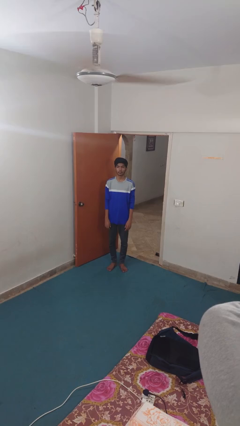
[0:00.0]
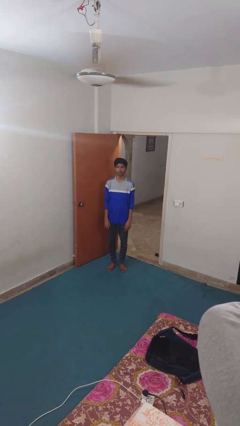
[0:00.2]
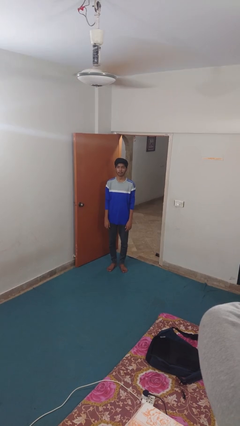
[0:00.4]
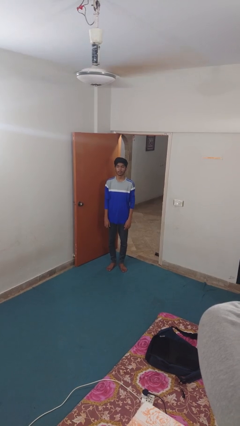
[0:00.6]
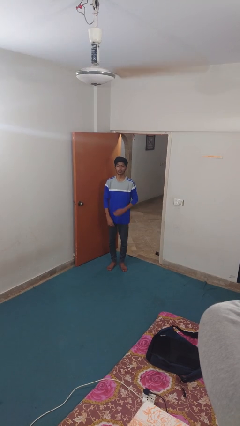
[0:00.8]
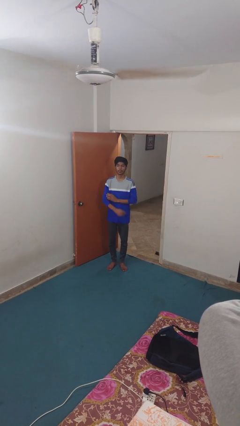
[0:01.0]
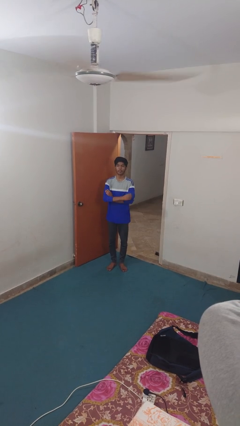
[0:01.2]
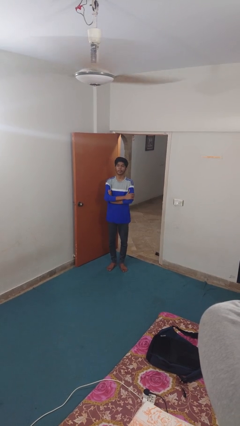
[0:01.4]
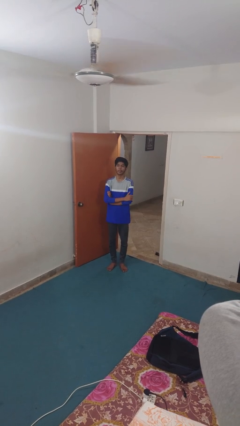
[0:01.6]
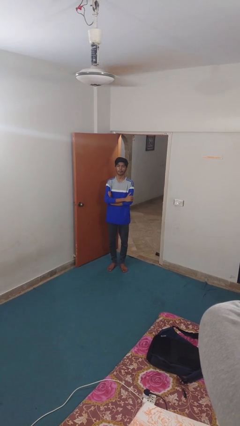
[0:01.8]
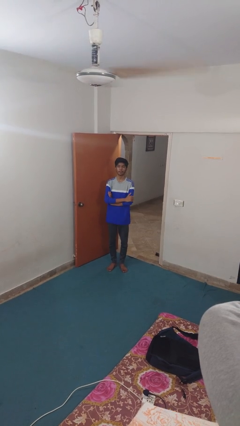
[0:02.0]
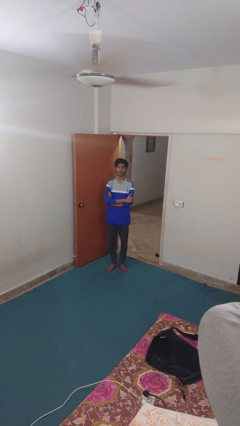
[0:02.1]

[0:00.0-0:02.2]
person crosses arms

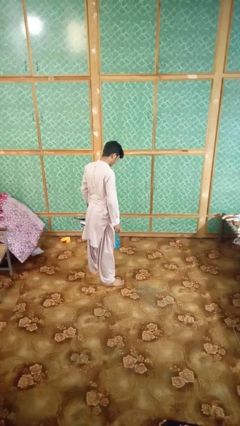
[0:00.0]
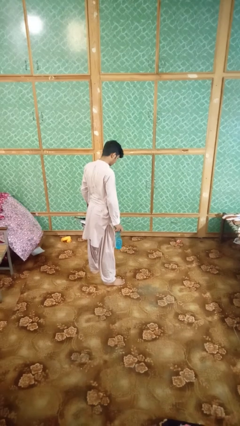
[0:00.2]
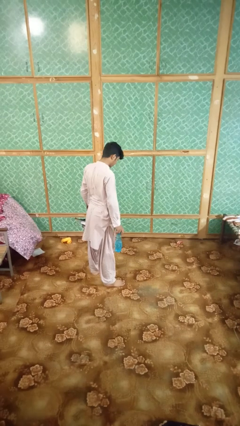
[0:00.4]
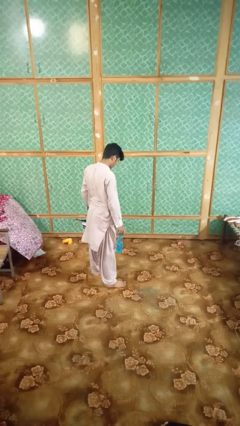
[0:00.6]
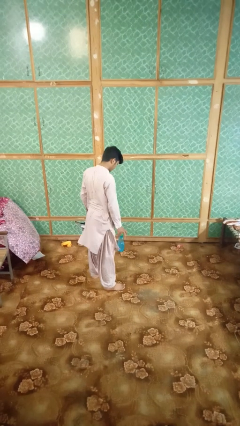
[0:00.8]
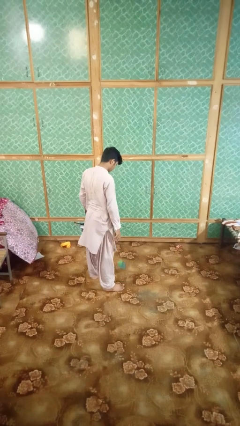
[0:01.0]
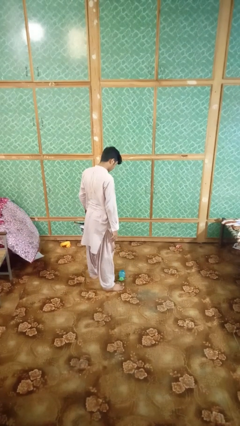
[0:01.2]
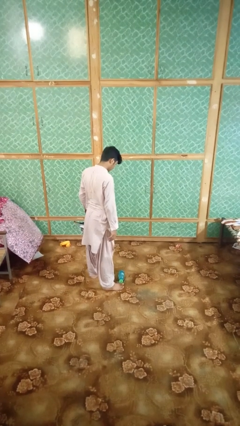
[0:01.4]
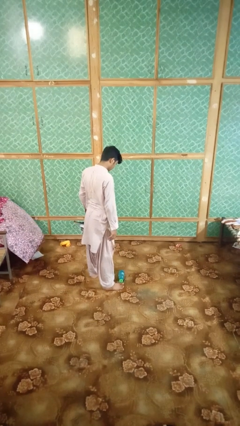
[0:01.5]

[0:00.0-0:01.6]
person drops object

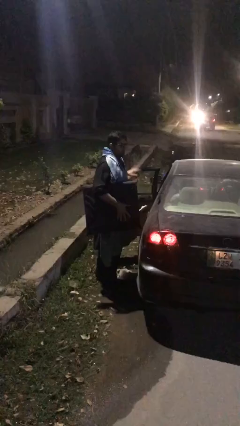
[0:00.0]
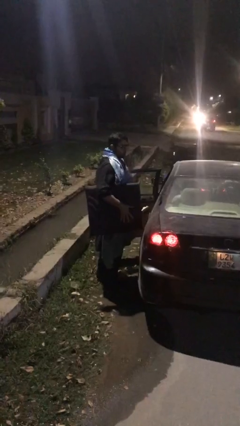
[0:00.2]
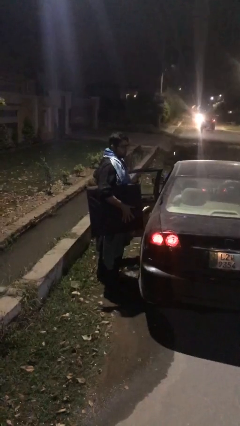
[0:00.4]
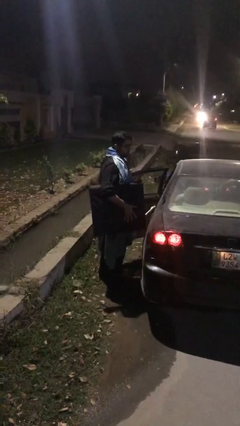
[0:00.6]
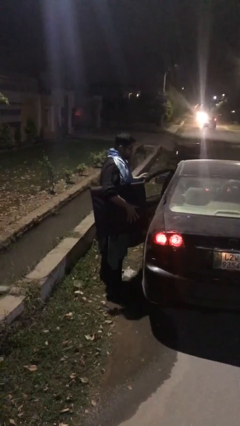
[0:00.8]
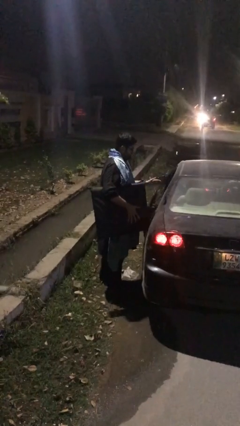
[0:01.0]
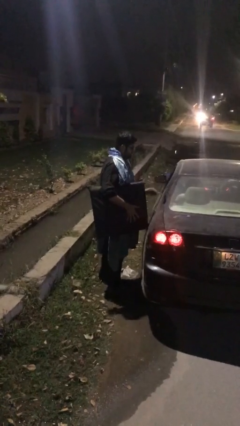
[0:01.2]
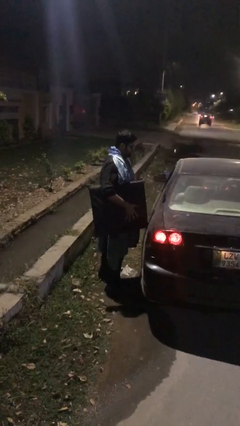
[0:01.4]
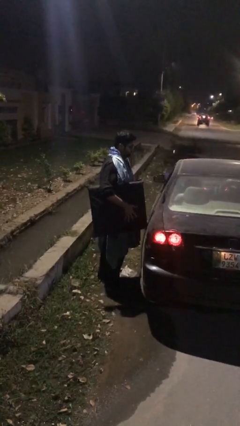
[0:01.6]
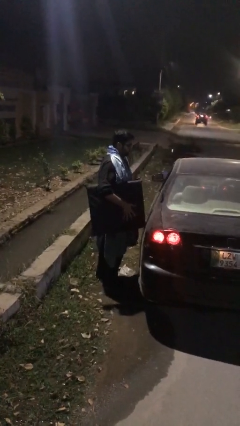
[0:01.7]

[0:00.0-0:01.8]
person closes car door

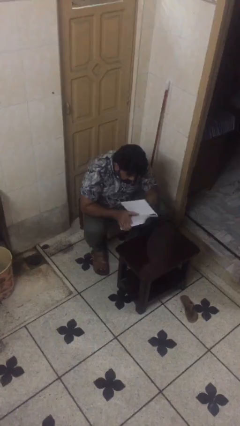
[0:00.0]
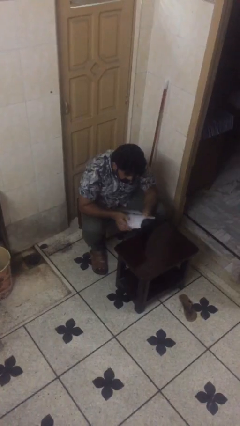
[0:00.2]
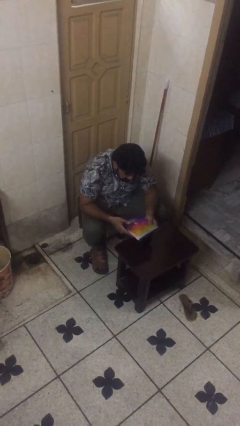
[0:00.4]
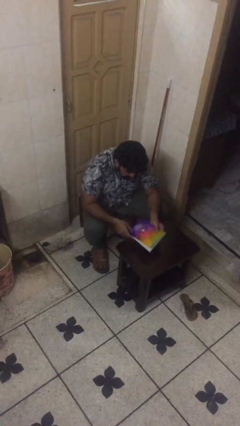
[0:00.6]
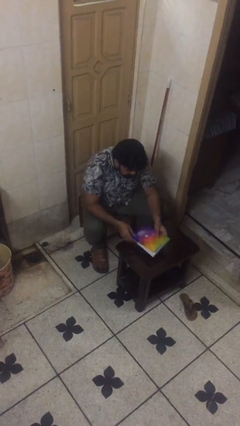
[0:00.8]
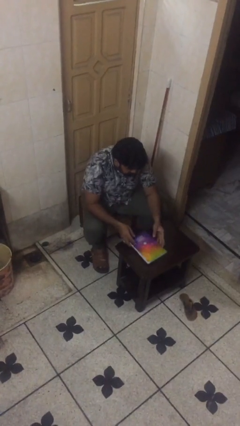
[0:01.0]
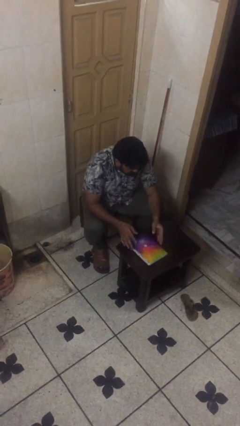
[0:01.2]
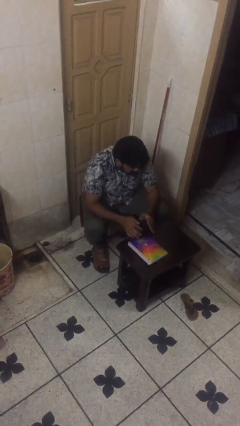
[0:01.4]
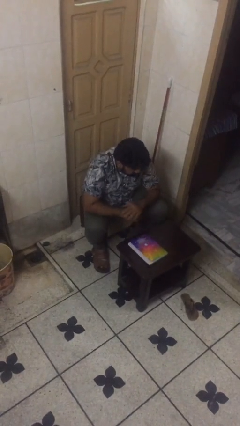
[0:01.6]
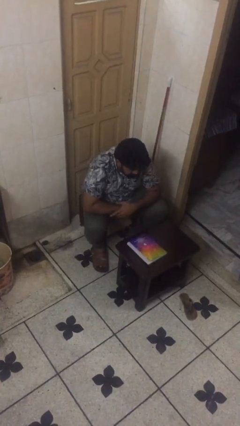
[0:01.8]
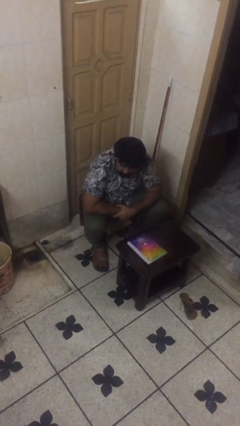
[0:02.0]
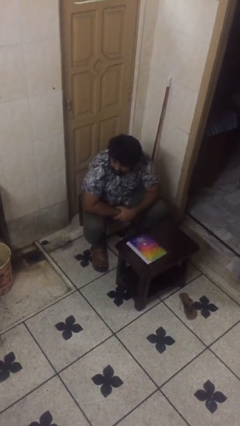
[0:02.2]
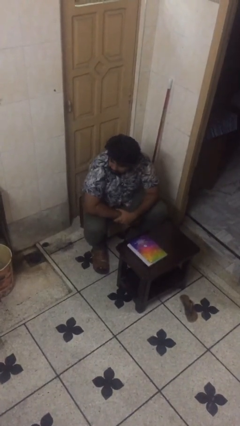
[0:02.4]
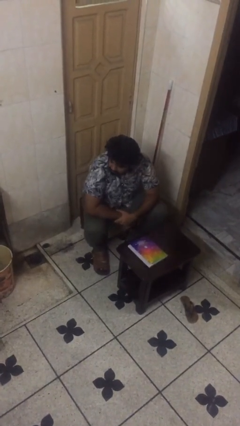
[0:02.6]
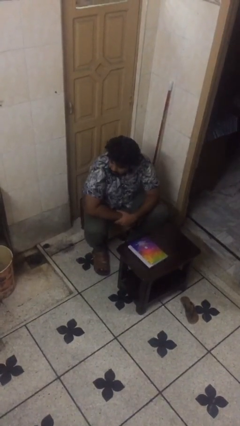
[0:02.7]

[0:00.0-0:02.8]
person puts down object on table

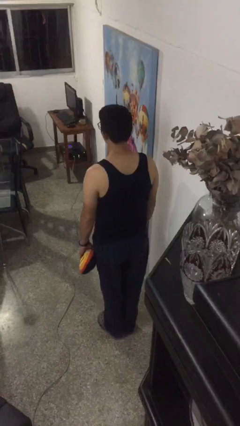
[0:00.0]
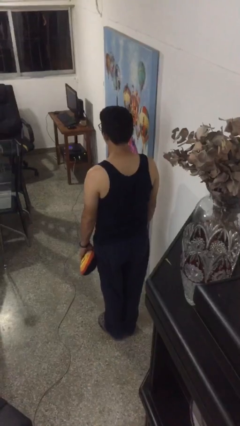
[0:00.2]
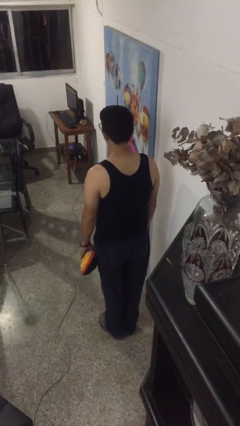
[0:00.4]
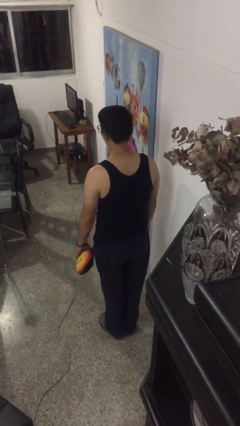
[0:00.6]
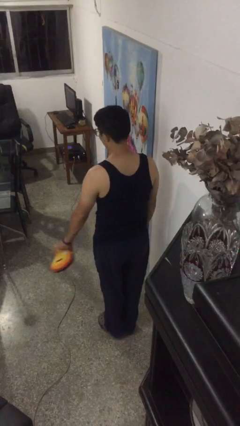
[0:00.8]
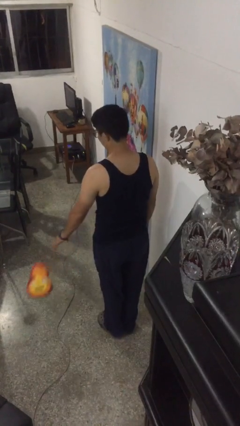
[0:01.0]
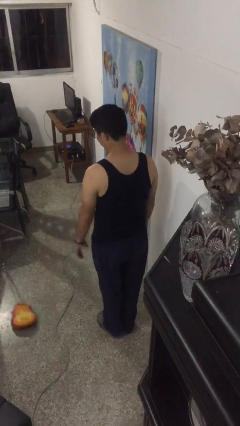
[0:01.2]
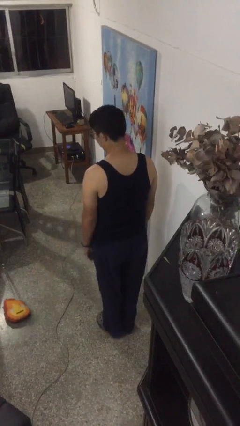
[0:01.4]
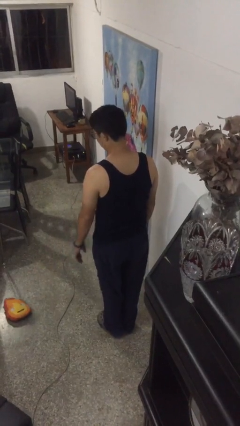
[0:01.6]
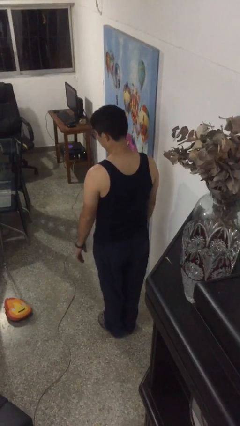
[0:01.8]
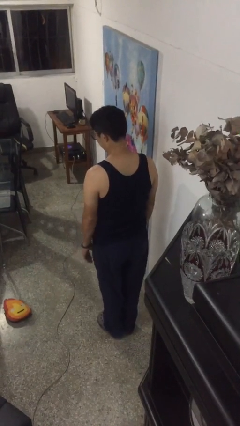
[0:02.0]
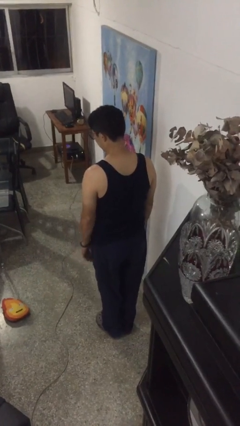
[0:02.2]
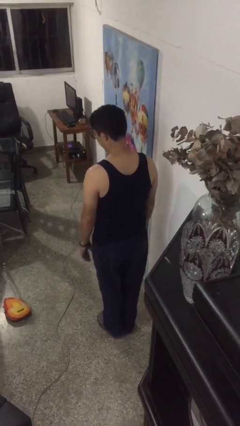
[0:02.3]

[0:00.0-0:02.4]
person throws object to ground

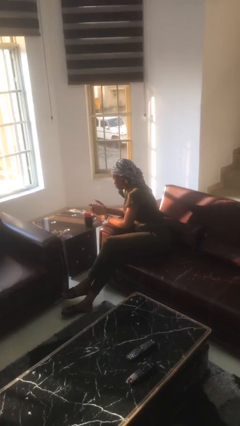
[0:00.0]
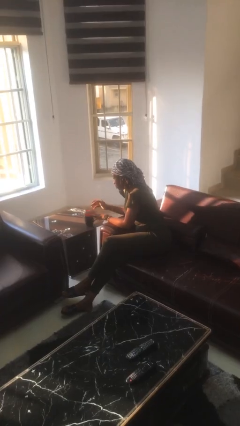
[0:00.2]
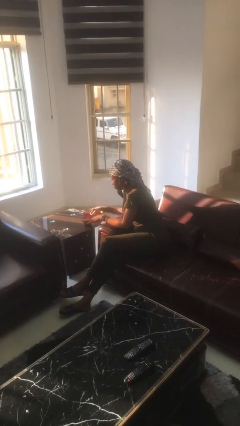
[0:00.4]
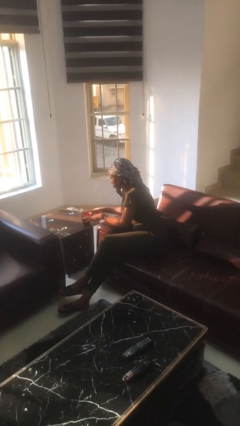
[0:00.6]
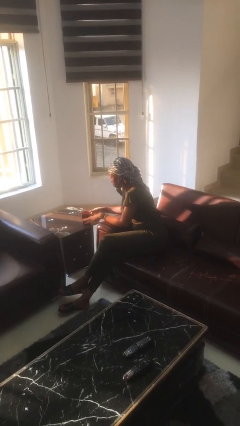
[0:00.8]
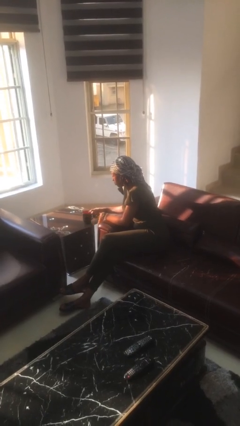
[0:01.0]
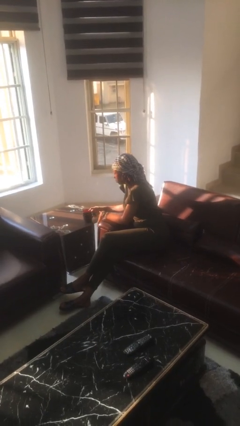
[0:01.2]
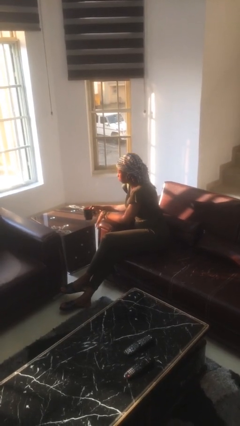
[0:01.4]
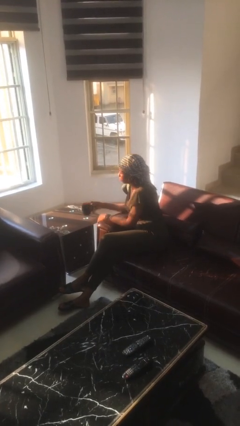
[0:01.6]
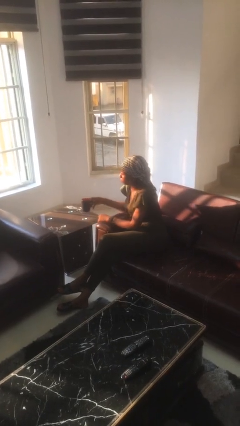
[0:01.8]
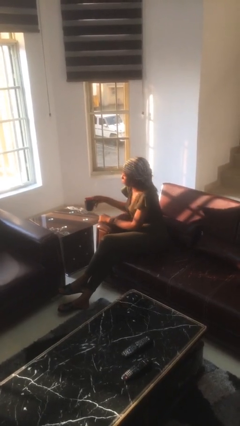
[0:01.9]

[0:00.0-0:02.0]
person picks up object from table

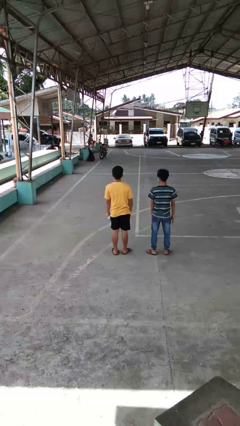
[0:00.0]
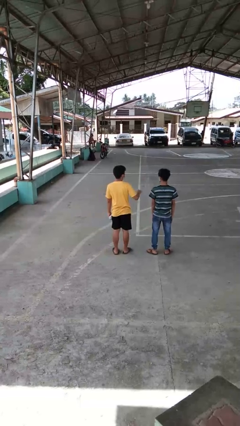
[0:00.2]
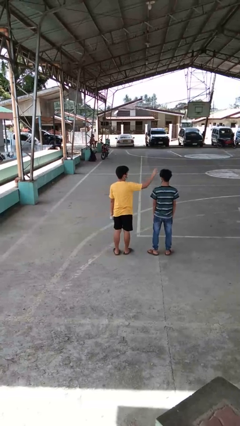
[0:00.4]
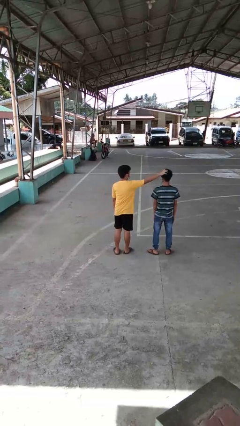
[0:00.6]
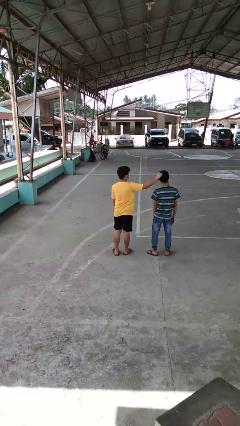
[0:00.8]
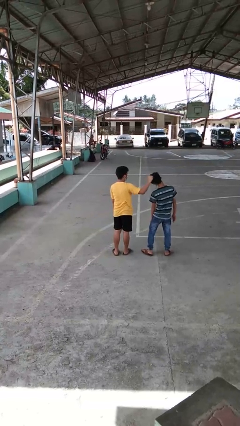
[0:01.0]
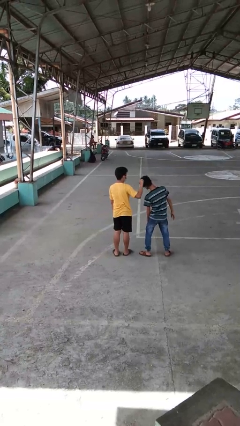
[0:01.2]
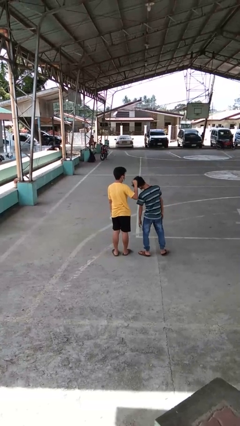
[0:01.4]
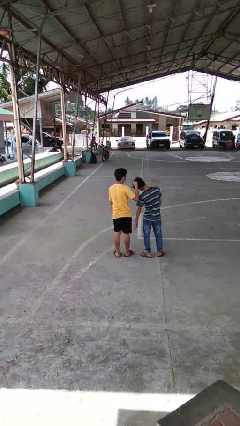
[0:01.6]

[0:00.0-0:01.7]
person grabs person by hair

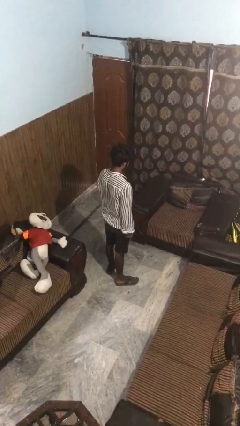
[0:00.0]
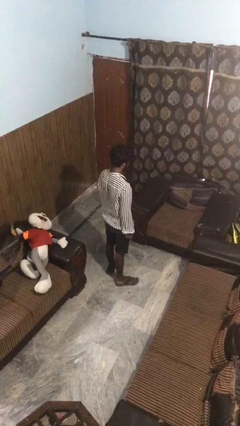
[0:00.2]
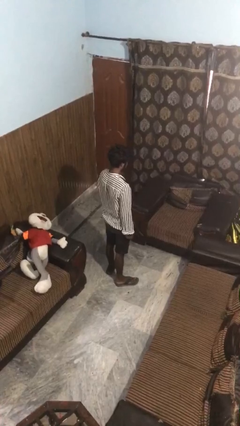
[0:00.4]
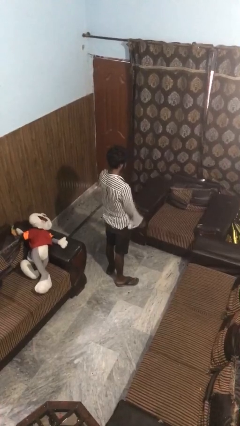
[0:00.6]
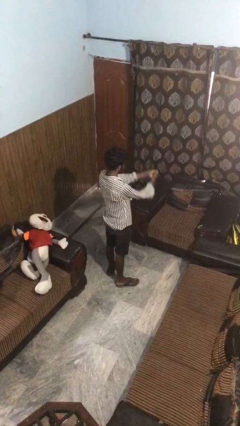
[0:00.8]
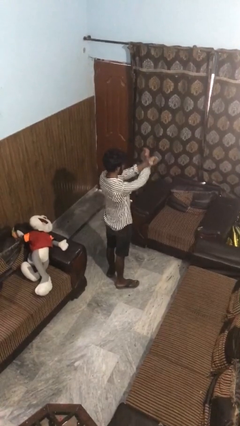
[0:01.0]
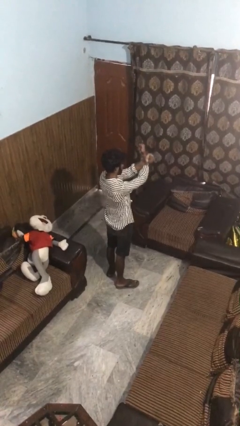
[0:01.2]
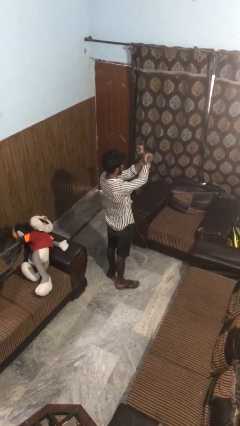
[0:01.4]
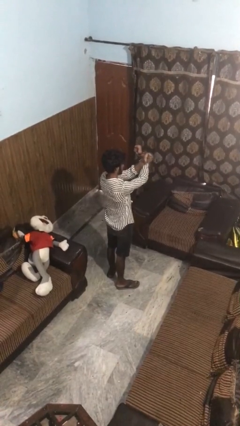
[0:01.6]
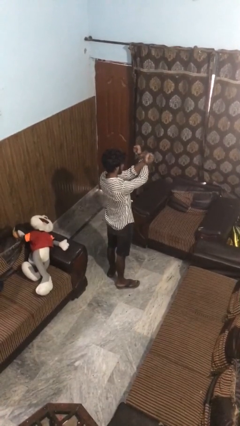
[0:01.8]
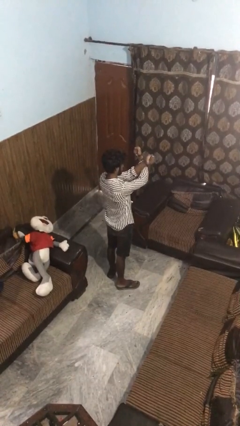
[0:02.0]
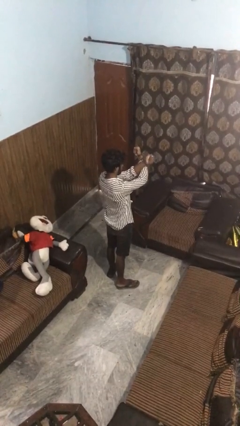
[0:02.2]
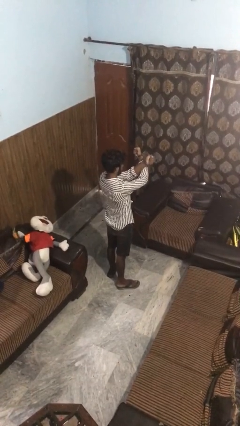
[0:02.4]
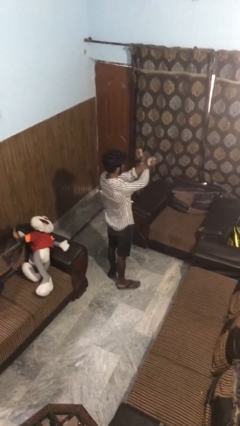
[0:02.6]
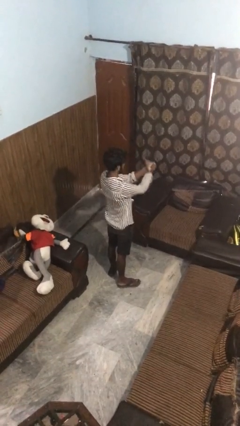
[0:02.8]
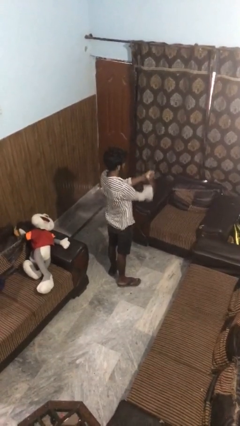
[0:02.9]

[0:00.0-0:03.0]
person gestures arms x
